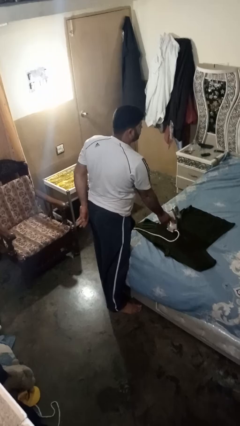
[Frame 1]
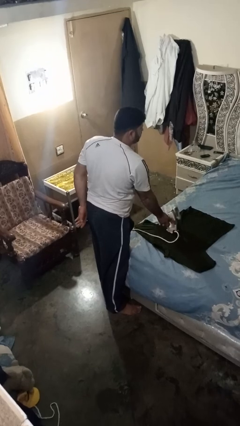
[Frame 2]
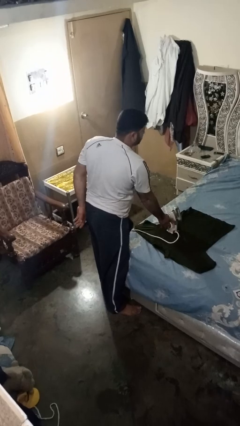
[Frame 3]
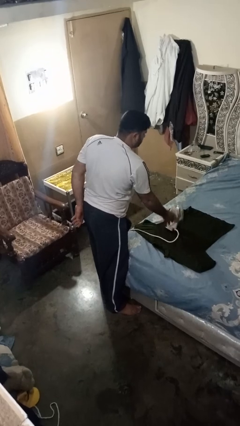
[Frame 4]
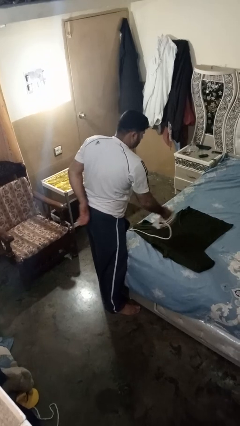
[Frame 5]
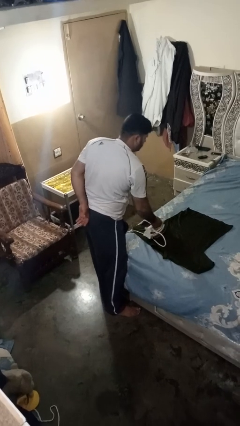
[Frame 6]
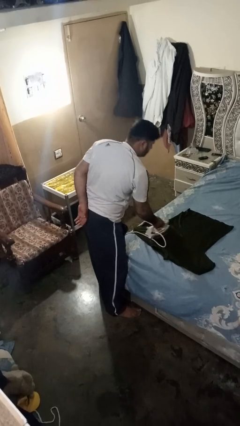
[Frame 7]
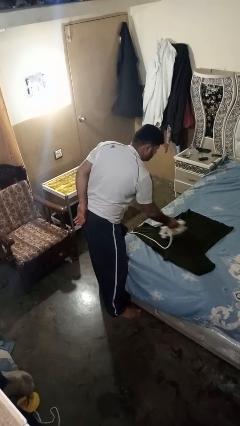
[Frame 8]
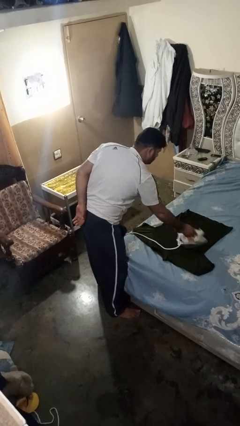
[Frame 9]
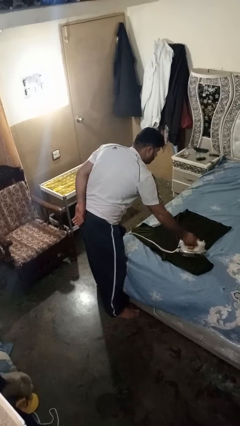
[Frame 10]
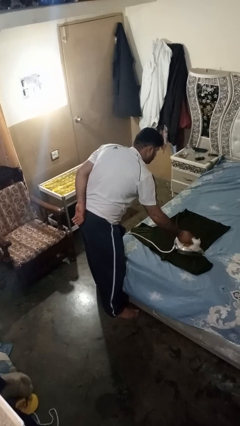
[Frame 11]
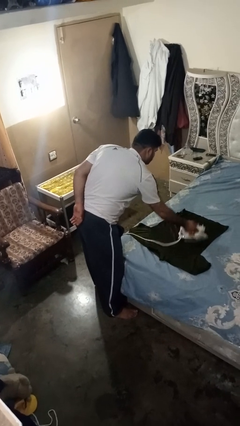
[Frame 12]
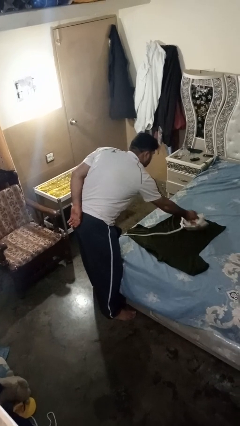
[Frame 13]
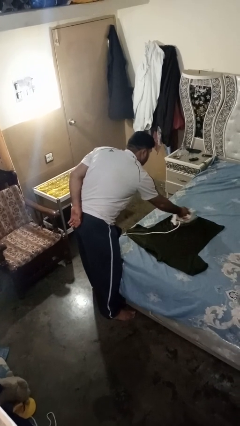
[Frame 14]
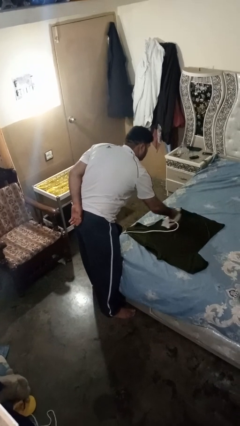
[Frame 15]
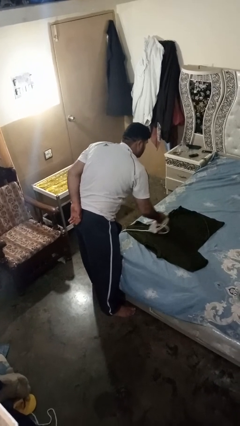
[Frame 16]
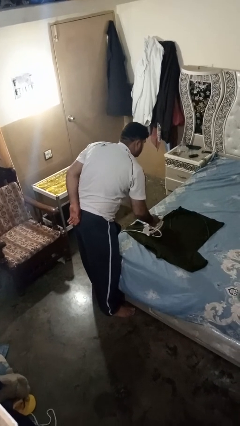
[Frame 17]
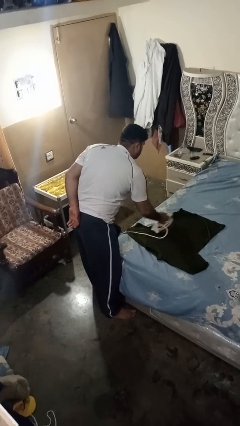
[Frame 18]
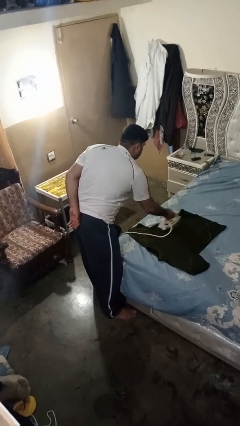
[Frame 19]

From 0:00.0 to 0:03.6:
person irons clothes

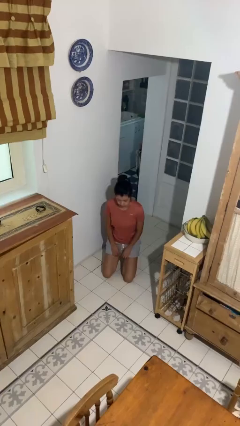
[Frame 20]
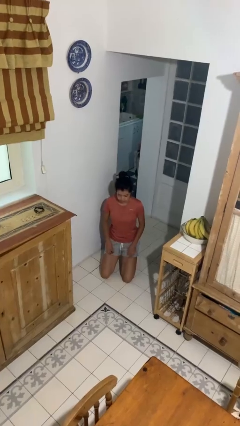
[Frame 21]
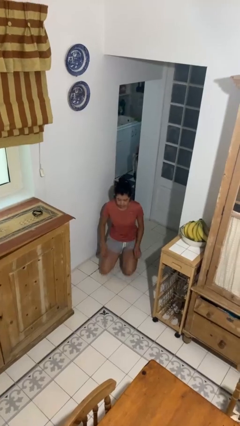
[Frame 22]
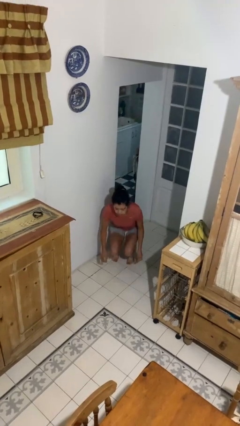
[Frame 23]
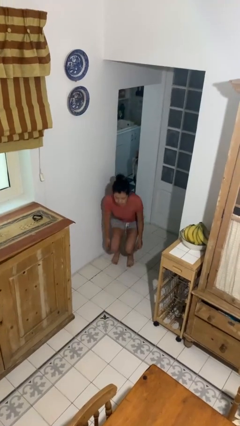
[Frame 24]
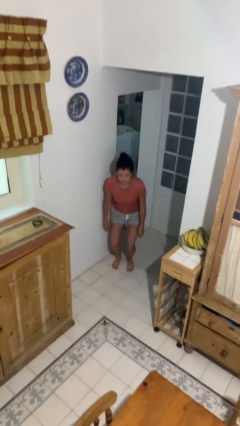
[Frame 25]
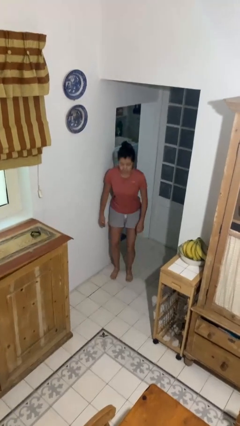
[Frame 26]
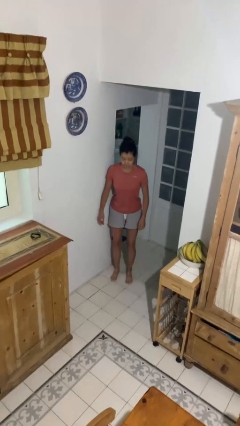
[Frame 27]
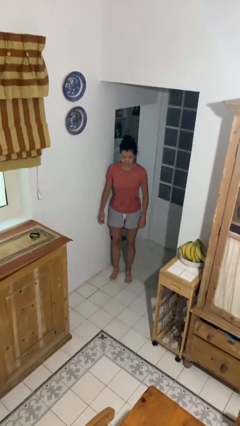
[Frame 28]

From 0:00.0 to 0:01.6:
person stands up from floor

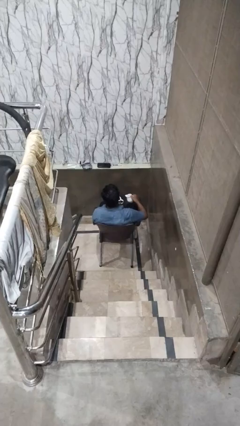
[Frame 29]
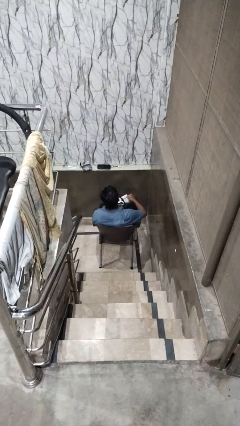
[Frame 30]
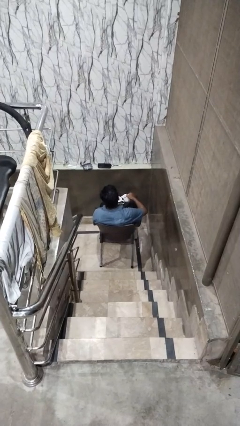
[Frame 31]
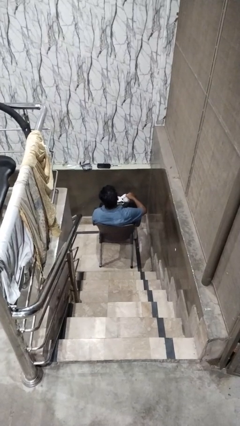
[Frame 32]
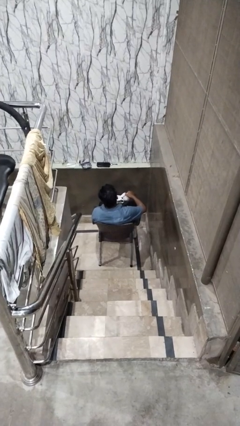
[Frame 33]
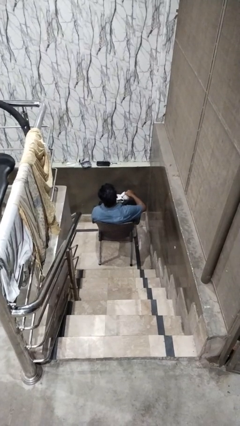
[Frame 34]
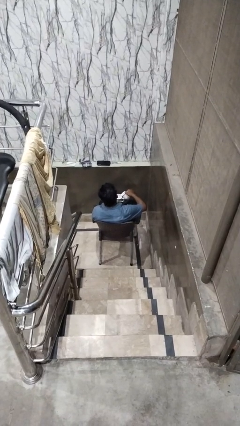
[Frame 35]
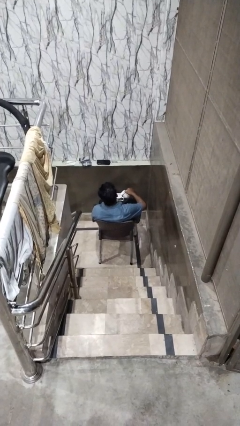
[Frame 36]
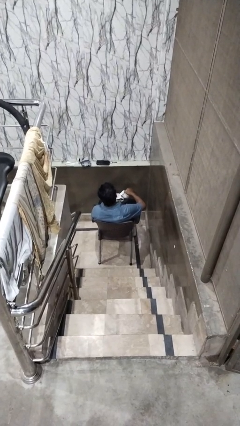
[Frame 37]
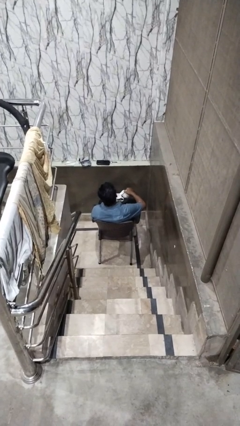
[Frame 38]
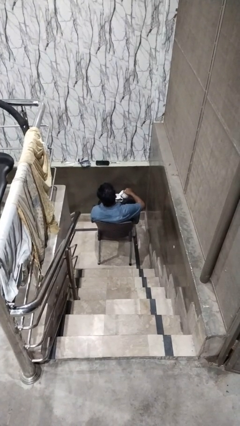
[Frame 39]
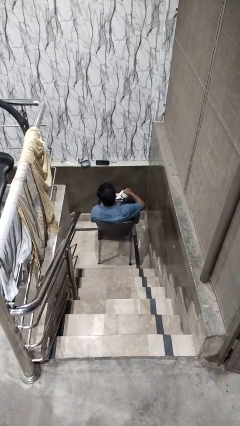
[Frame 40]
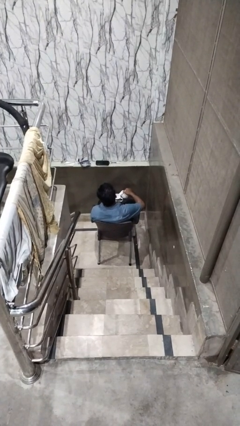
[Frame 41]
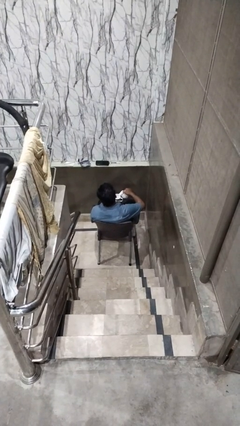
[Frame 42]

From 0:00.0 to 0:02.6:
person pours coffee into mug

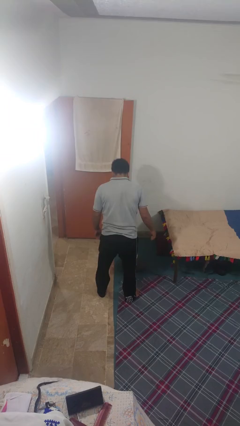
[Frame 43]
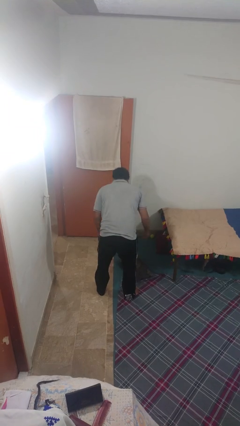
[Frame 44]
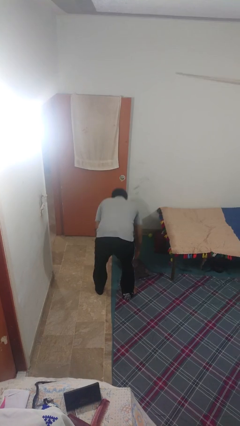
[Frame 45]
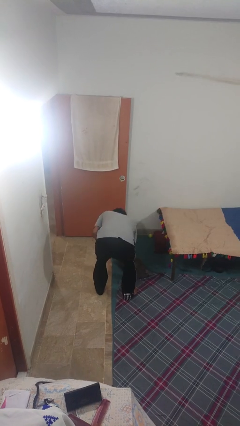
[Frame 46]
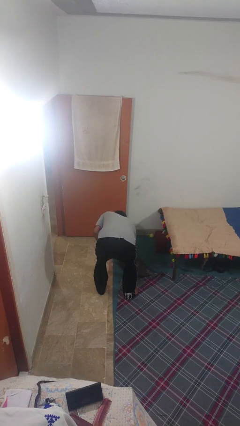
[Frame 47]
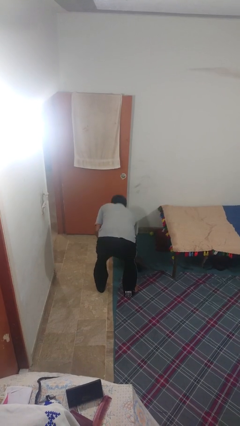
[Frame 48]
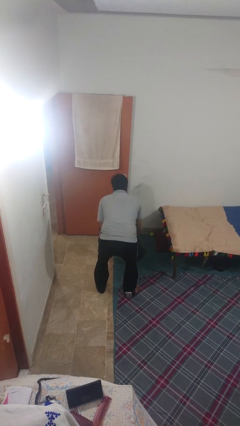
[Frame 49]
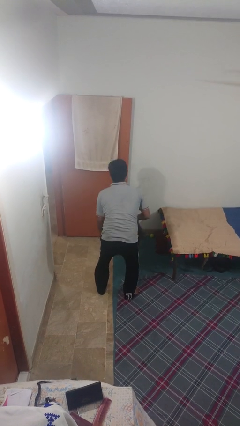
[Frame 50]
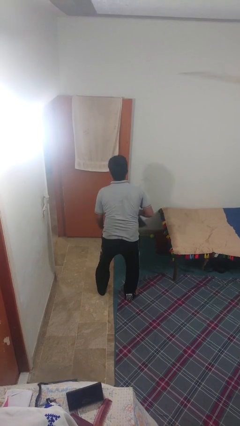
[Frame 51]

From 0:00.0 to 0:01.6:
person picks up object from floor

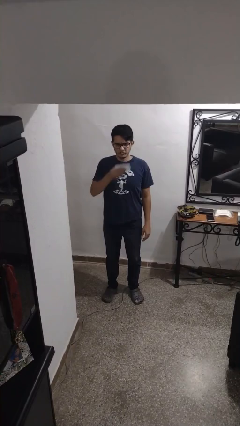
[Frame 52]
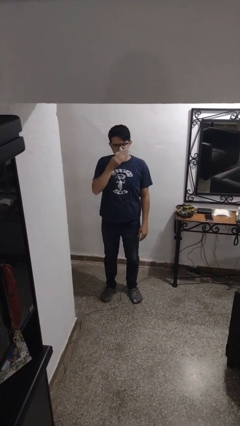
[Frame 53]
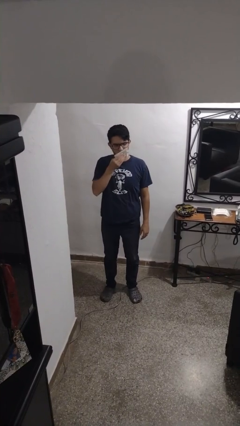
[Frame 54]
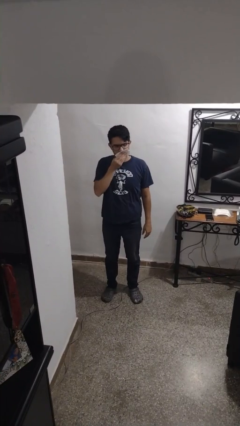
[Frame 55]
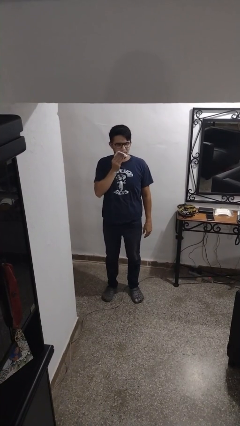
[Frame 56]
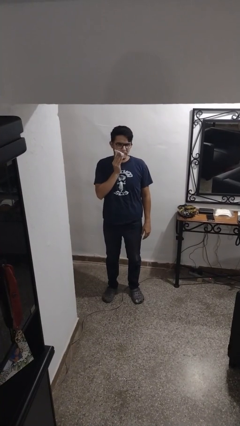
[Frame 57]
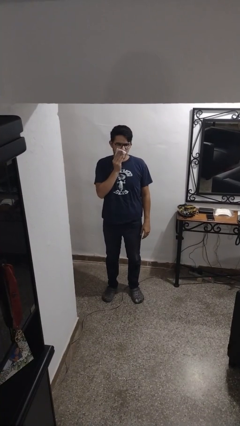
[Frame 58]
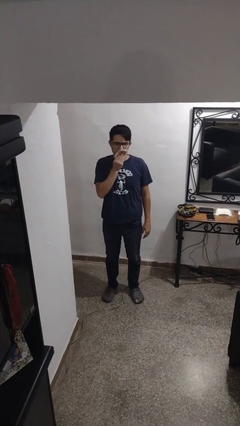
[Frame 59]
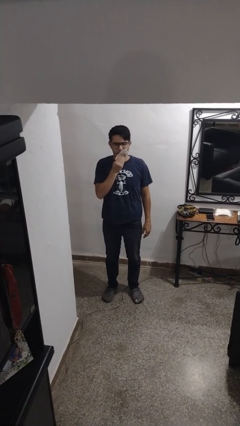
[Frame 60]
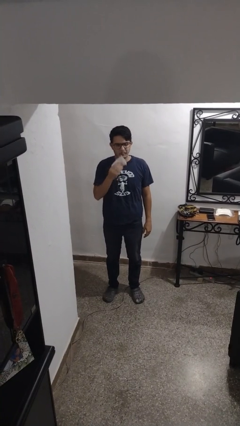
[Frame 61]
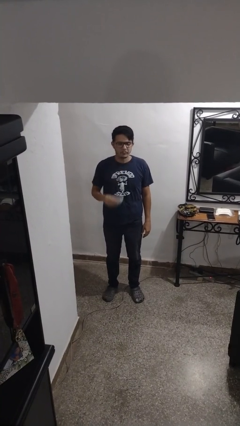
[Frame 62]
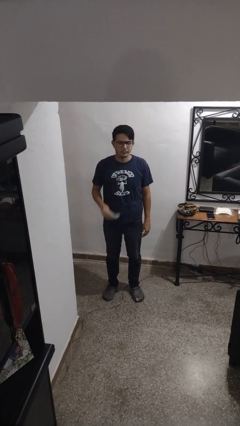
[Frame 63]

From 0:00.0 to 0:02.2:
person wipes mouth with napkin

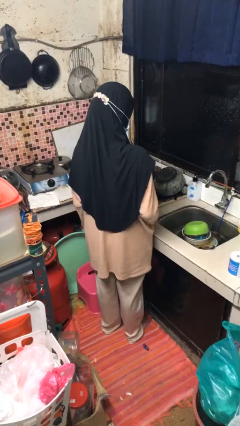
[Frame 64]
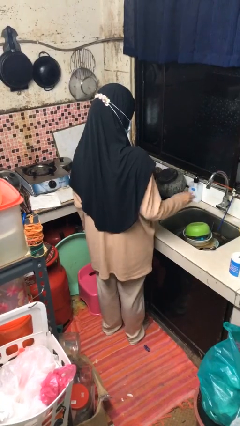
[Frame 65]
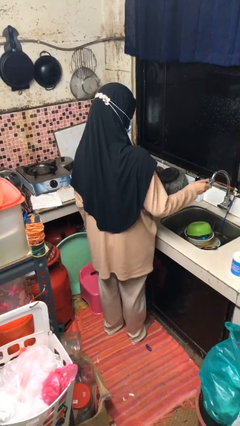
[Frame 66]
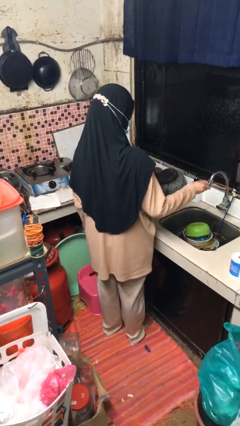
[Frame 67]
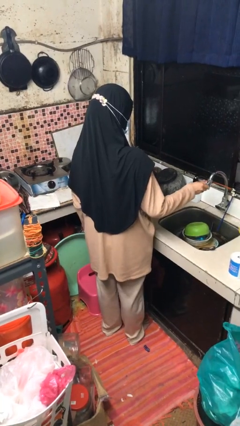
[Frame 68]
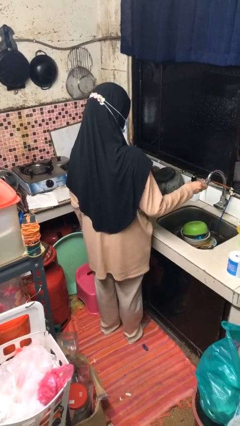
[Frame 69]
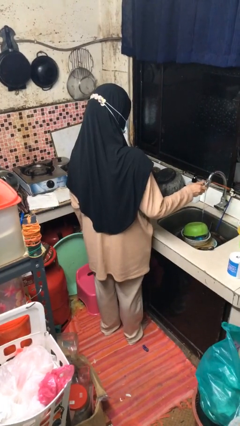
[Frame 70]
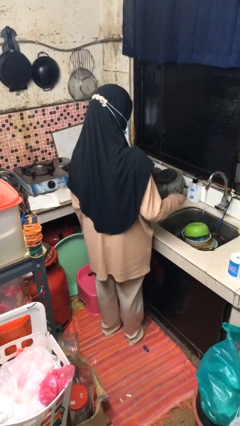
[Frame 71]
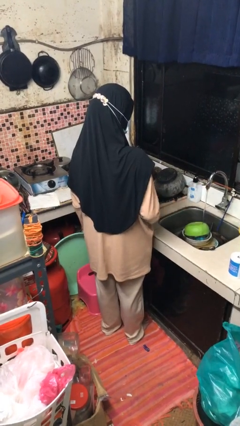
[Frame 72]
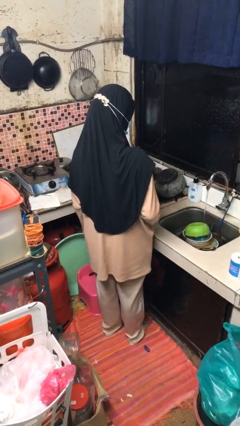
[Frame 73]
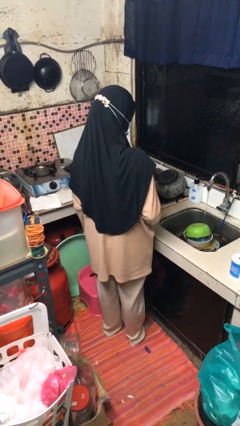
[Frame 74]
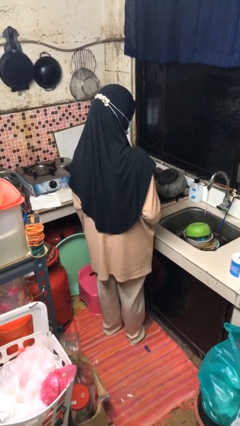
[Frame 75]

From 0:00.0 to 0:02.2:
person turns on faucet

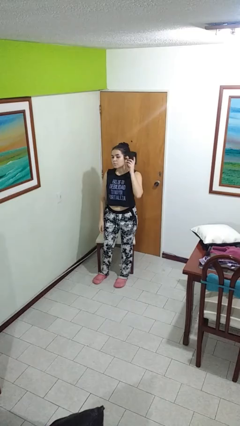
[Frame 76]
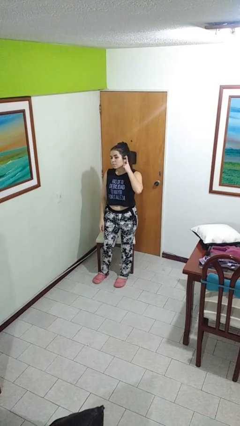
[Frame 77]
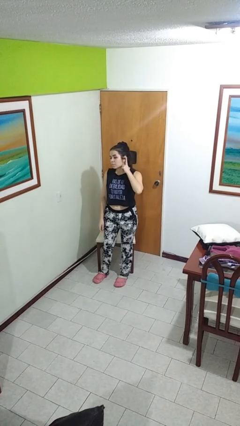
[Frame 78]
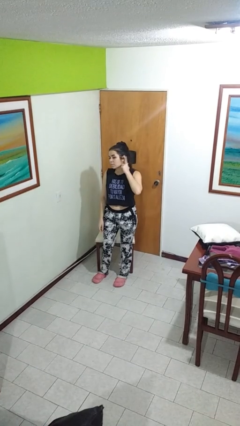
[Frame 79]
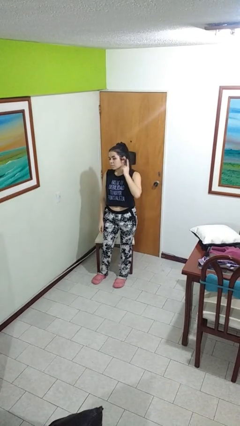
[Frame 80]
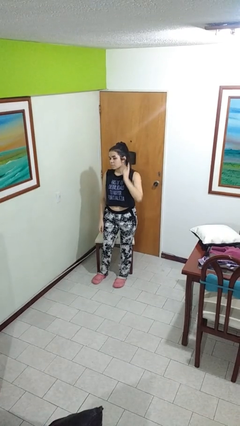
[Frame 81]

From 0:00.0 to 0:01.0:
person gestures listen closely

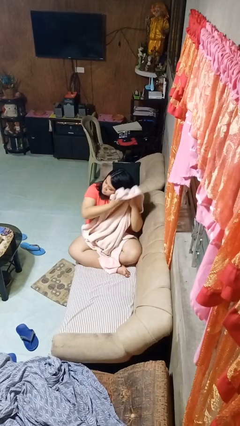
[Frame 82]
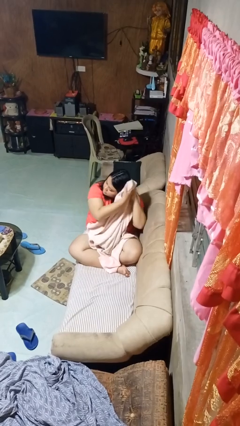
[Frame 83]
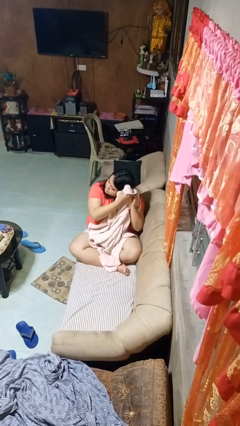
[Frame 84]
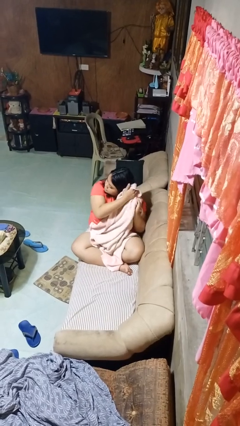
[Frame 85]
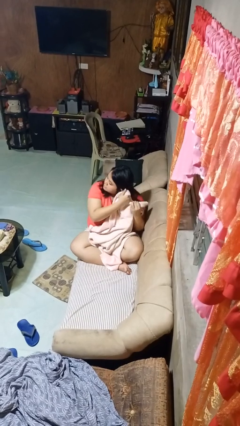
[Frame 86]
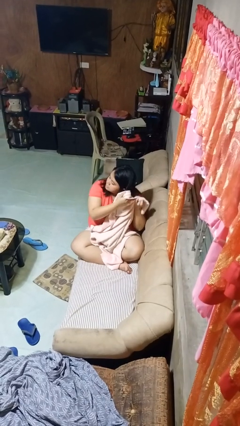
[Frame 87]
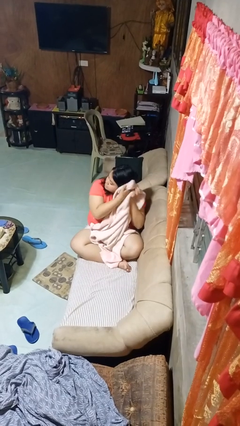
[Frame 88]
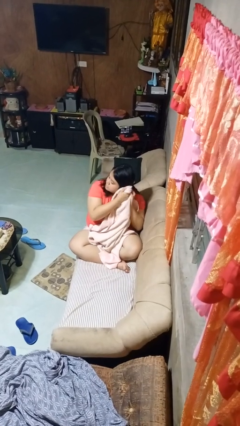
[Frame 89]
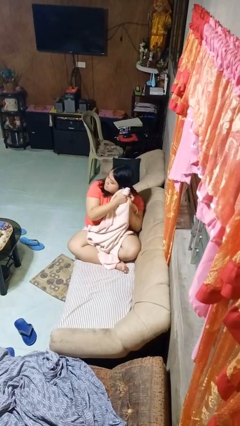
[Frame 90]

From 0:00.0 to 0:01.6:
person dries hair with towel

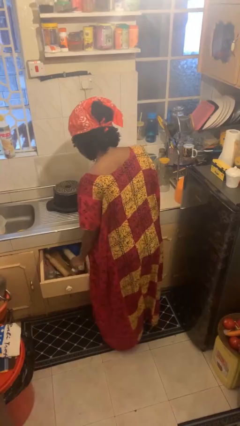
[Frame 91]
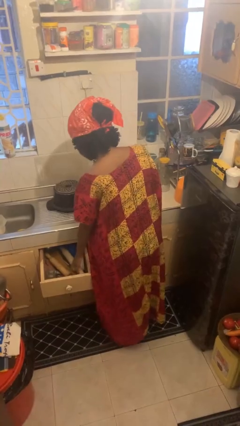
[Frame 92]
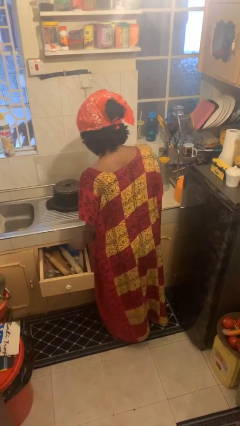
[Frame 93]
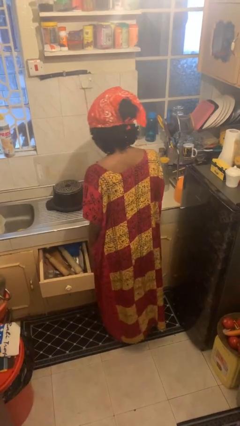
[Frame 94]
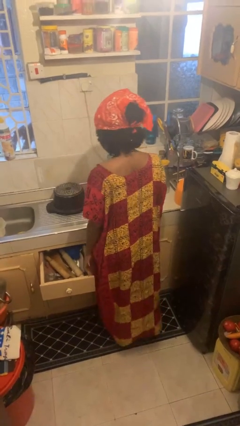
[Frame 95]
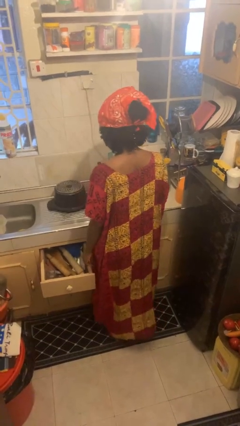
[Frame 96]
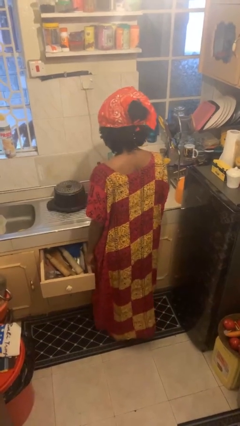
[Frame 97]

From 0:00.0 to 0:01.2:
person puts object into kitchen drawer
